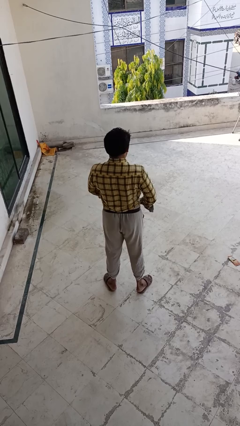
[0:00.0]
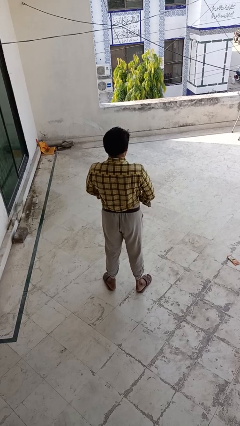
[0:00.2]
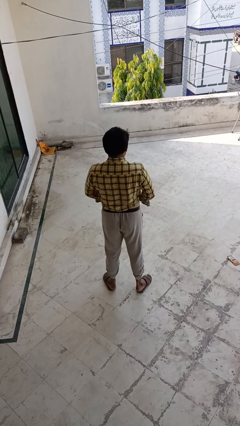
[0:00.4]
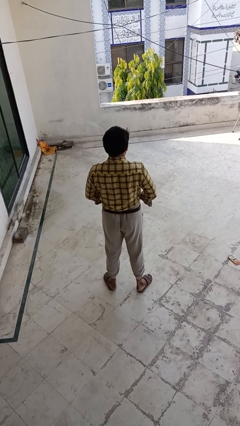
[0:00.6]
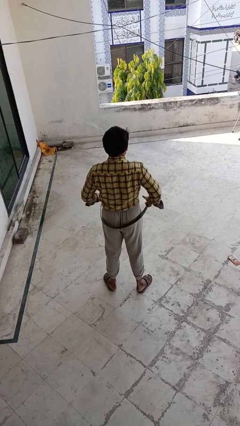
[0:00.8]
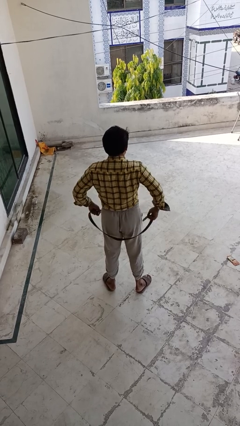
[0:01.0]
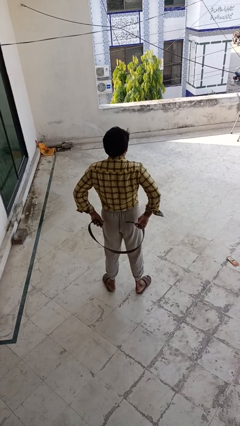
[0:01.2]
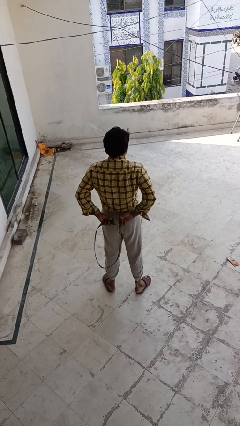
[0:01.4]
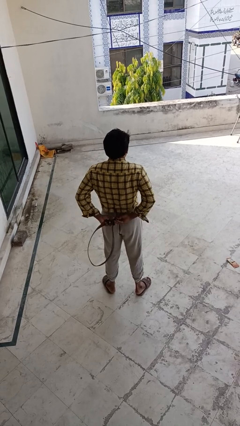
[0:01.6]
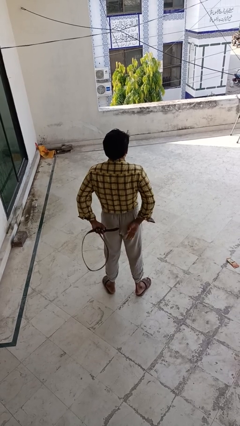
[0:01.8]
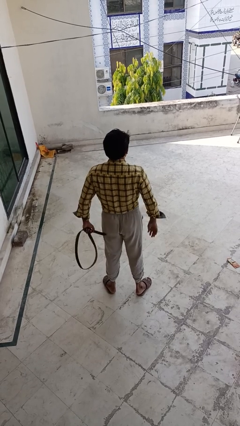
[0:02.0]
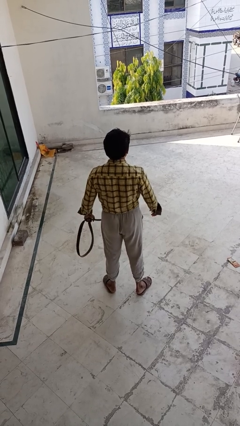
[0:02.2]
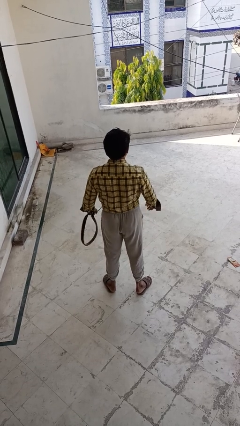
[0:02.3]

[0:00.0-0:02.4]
person takes off belt

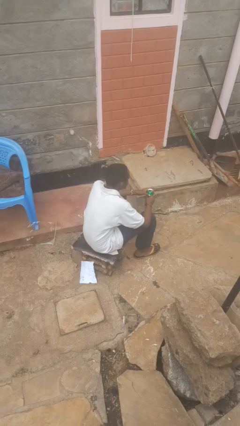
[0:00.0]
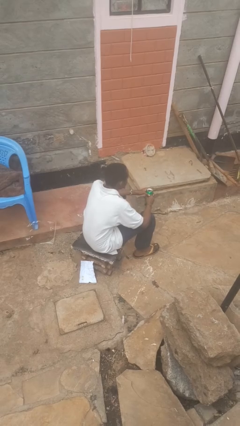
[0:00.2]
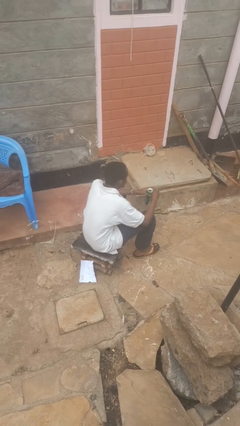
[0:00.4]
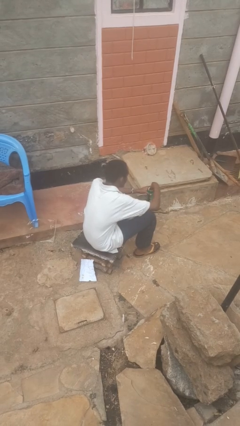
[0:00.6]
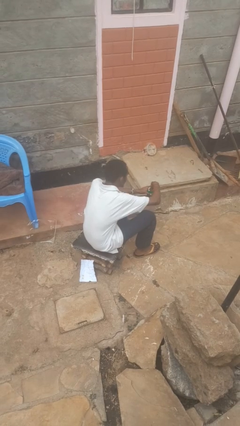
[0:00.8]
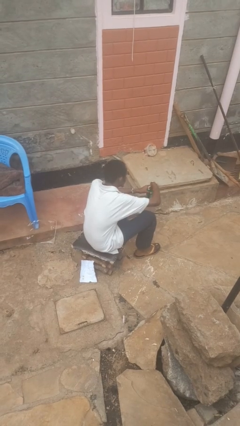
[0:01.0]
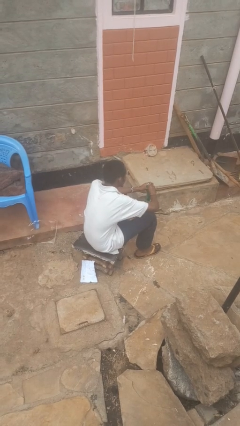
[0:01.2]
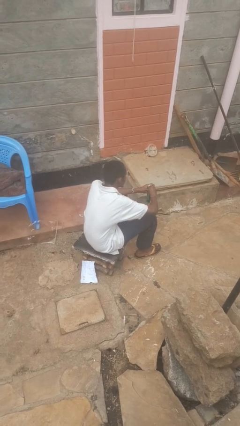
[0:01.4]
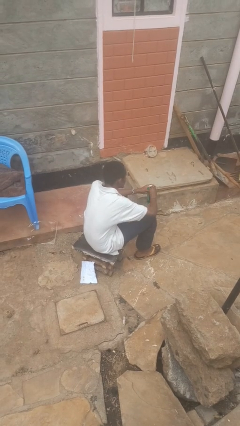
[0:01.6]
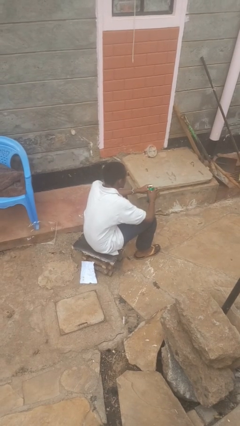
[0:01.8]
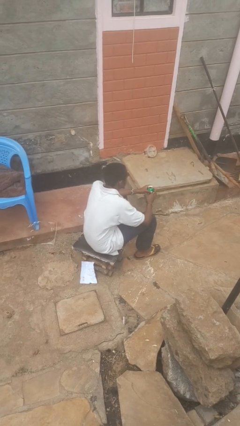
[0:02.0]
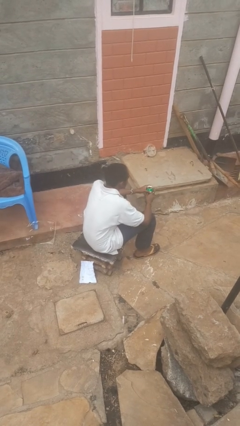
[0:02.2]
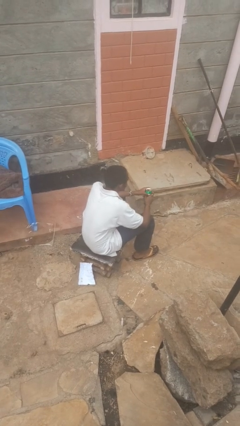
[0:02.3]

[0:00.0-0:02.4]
person opens beverage can

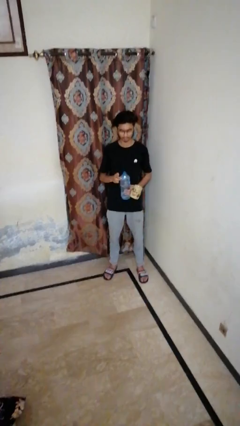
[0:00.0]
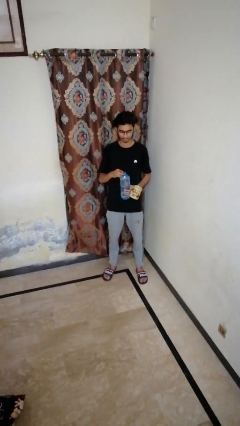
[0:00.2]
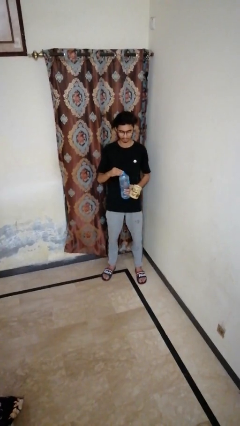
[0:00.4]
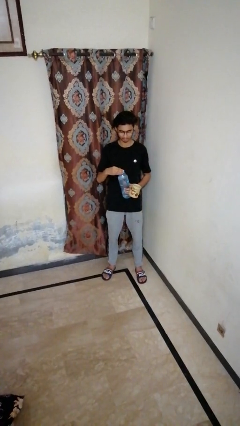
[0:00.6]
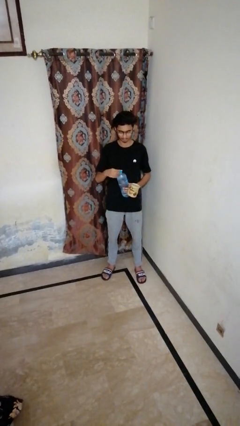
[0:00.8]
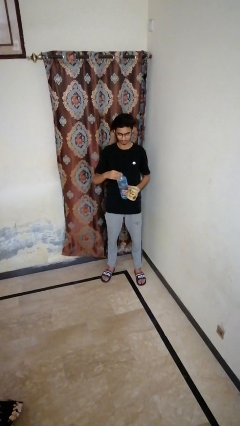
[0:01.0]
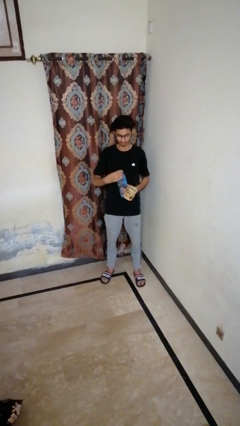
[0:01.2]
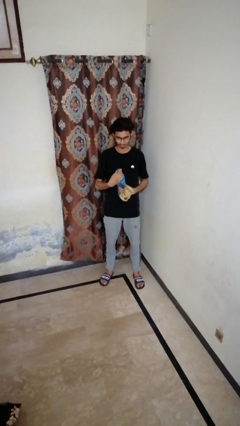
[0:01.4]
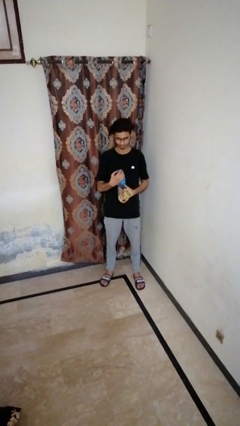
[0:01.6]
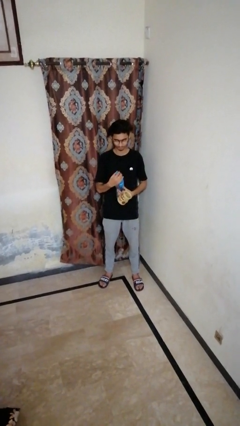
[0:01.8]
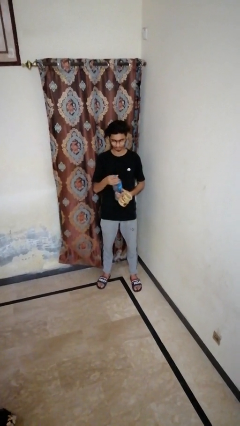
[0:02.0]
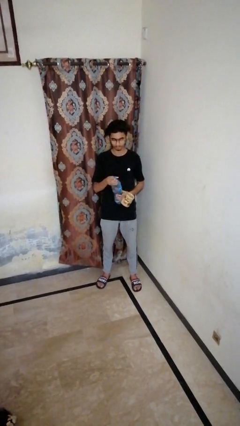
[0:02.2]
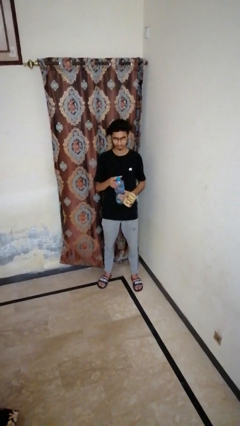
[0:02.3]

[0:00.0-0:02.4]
person screws lid to bottle

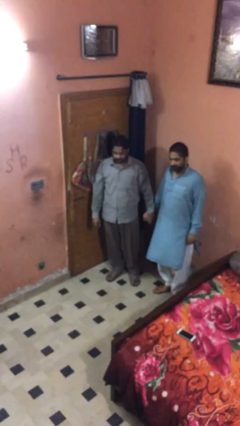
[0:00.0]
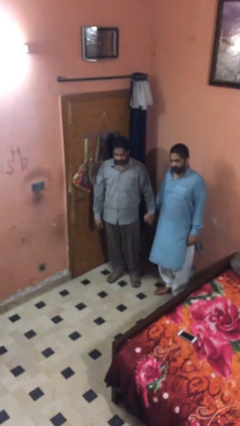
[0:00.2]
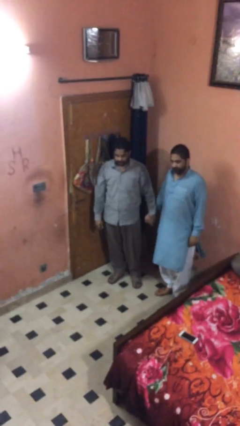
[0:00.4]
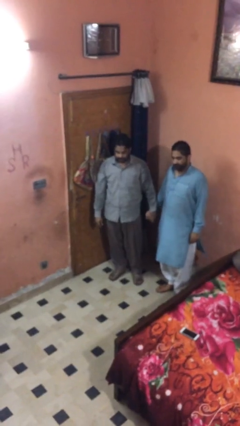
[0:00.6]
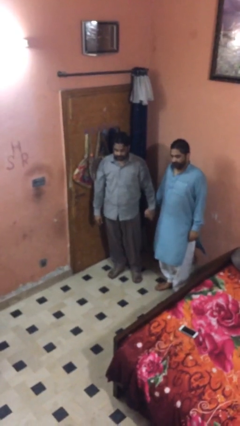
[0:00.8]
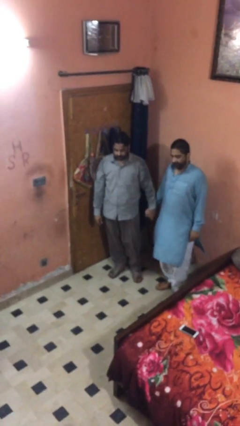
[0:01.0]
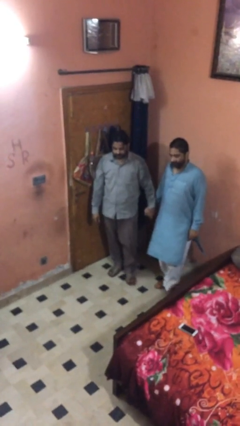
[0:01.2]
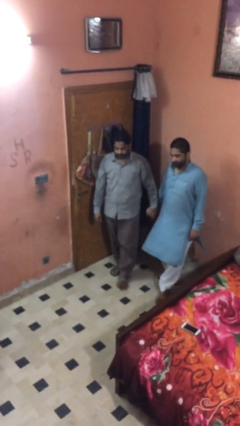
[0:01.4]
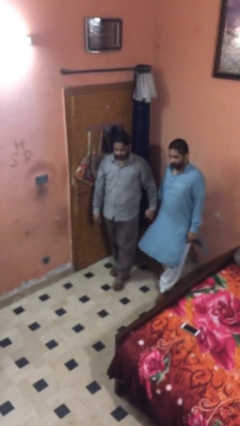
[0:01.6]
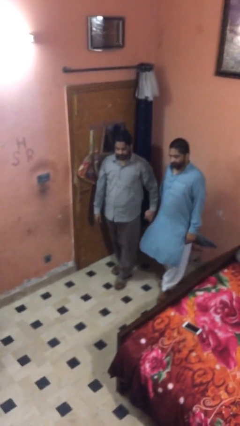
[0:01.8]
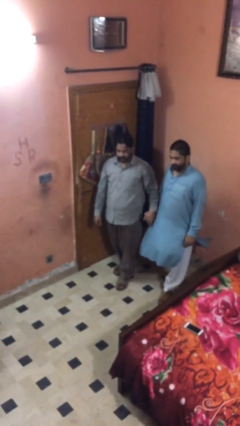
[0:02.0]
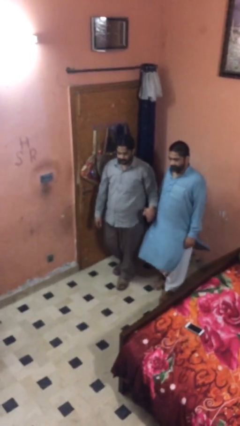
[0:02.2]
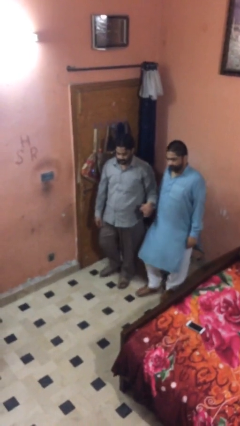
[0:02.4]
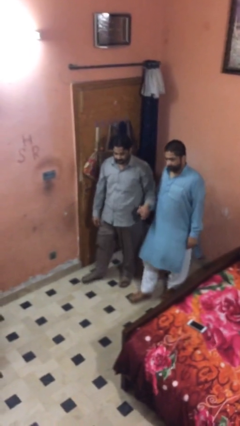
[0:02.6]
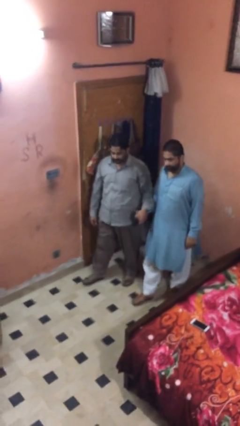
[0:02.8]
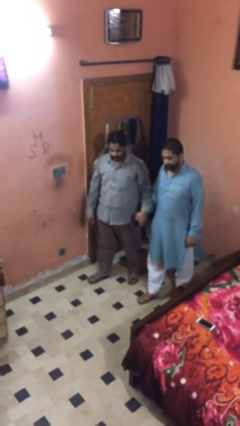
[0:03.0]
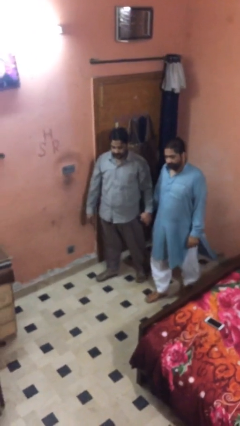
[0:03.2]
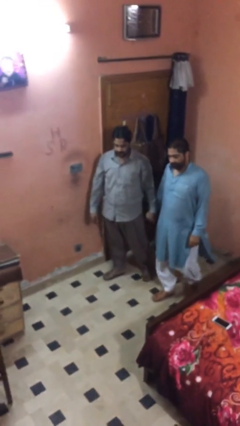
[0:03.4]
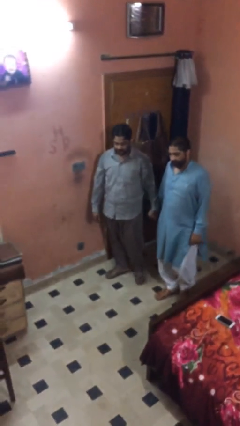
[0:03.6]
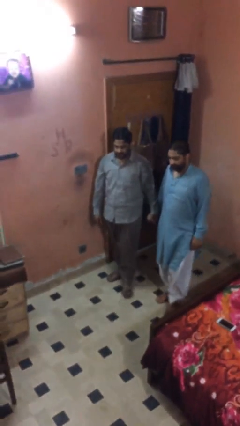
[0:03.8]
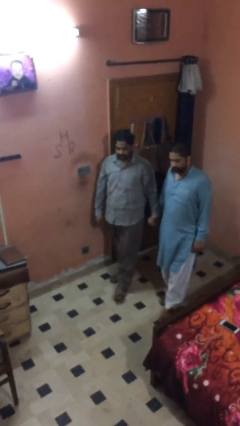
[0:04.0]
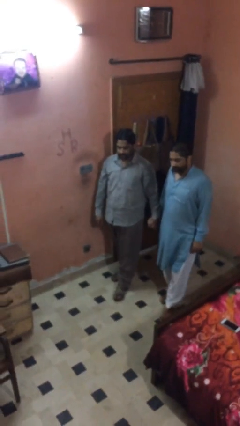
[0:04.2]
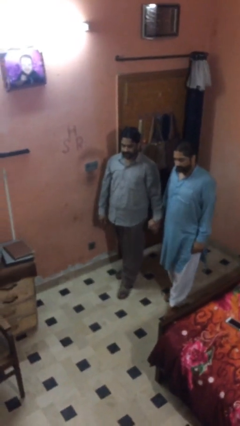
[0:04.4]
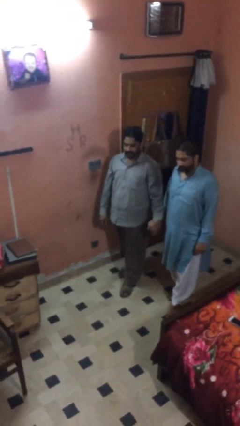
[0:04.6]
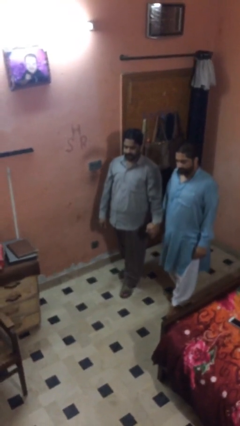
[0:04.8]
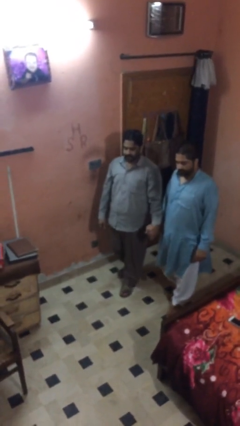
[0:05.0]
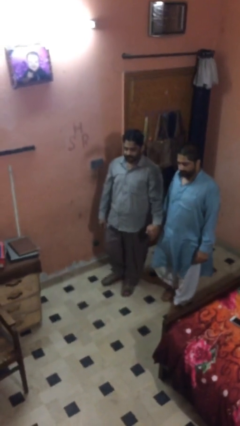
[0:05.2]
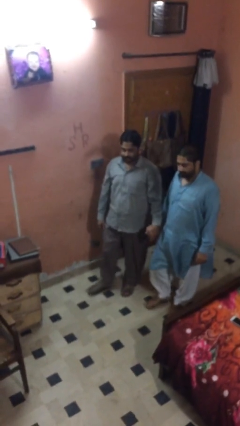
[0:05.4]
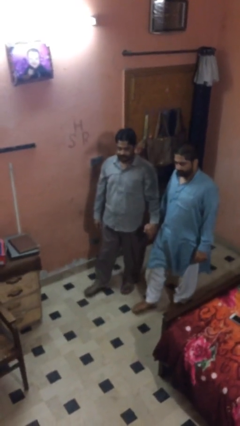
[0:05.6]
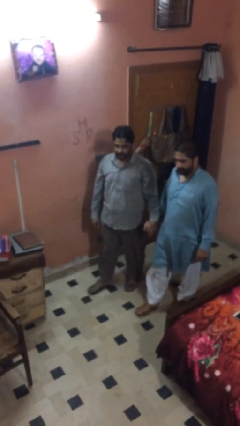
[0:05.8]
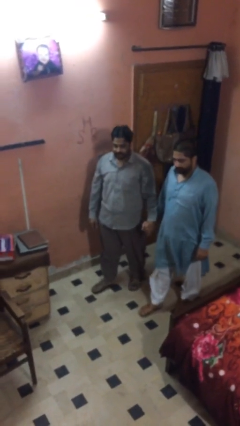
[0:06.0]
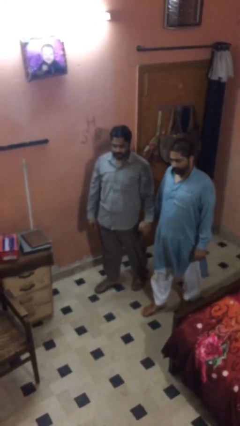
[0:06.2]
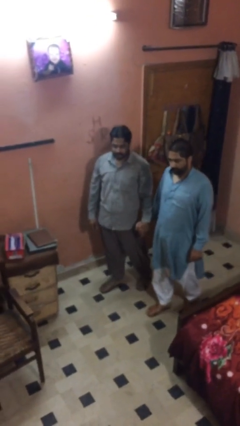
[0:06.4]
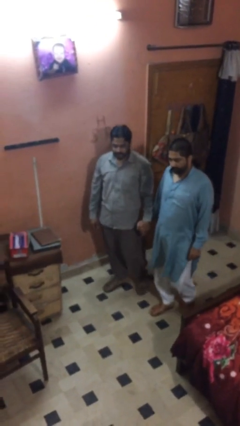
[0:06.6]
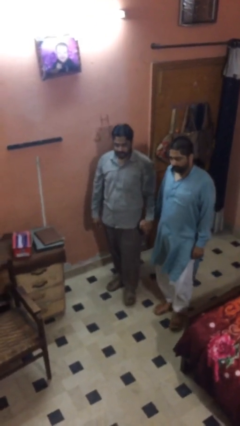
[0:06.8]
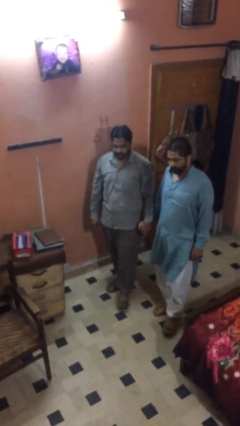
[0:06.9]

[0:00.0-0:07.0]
person holds hand

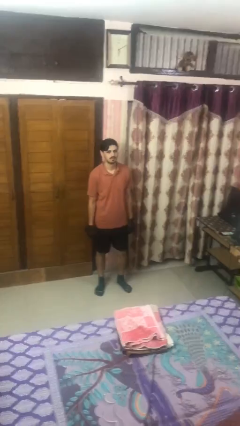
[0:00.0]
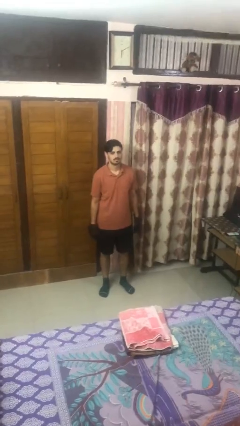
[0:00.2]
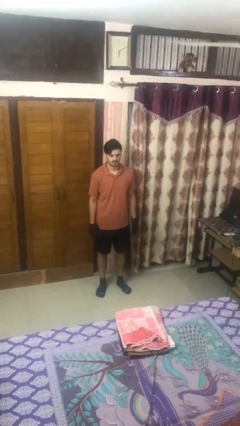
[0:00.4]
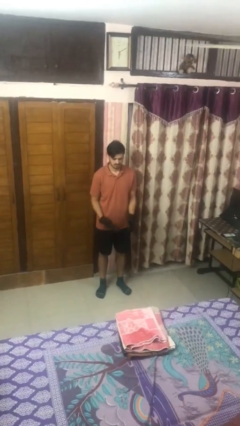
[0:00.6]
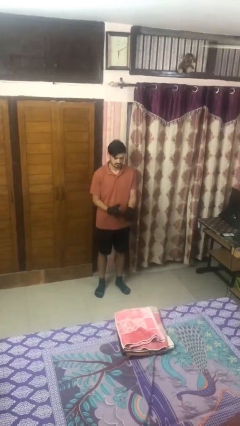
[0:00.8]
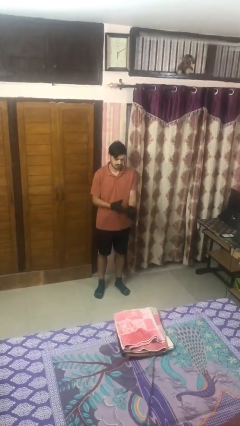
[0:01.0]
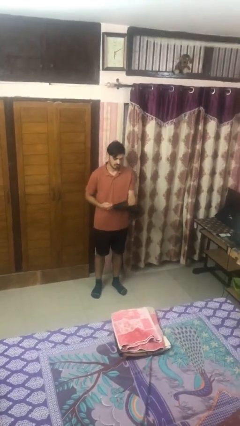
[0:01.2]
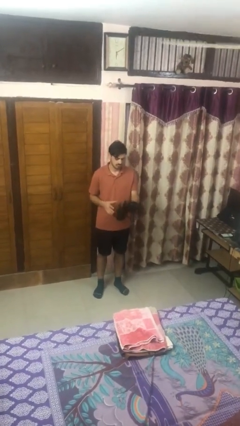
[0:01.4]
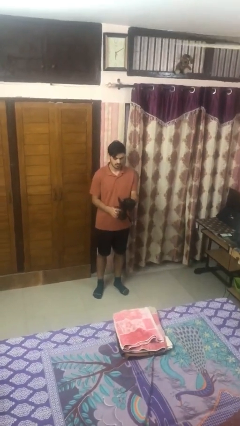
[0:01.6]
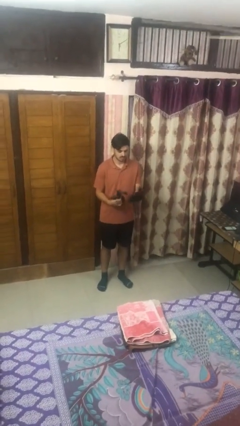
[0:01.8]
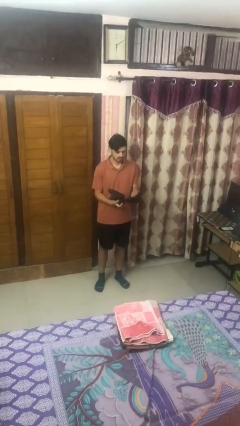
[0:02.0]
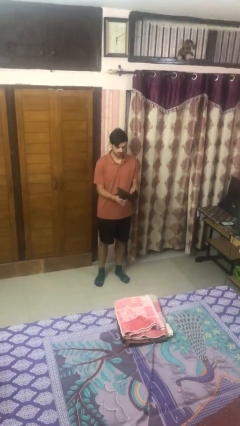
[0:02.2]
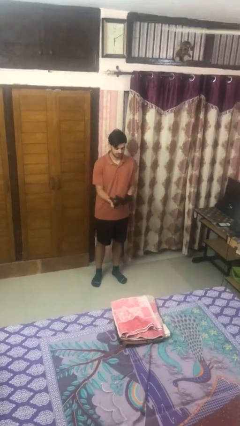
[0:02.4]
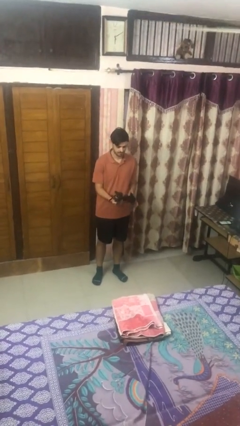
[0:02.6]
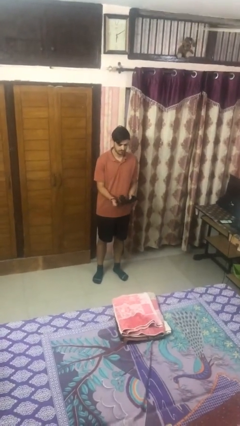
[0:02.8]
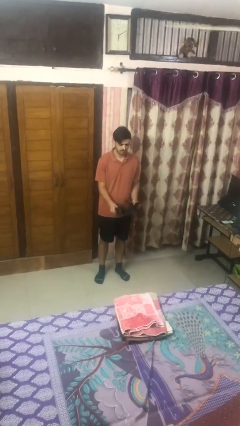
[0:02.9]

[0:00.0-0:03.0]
person takes off gloves
